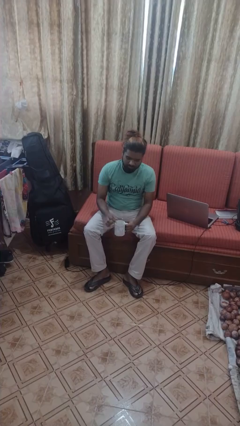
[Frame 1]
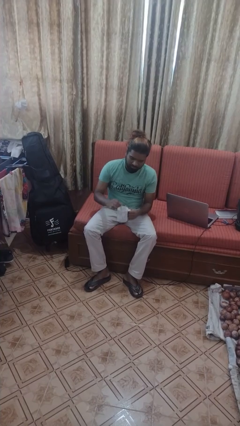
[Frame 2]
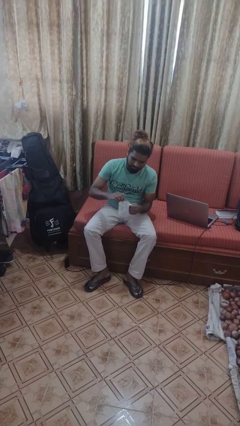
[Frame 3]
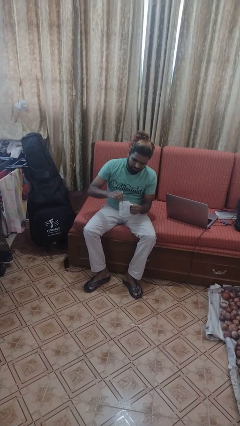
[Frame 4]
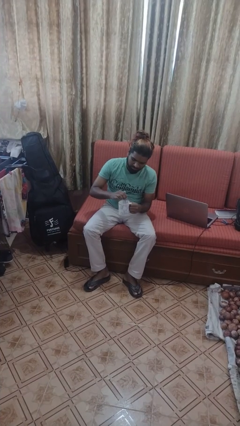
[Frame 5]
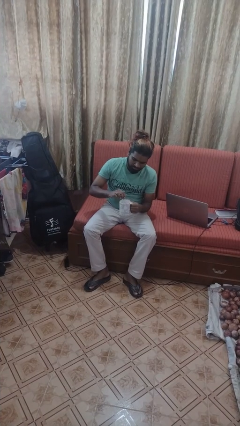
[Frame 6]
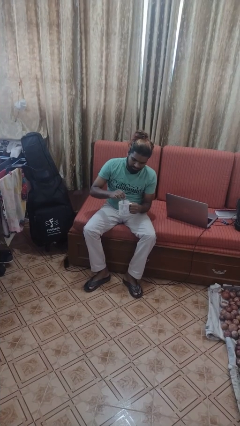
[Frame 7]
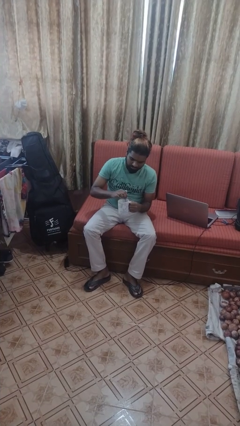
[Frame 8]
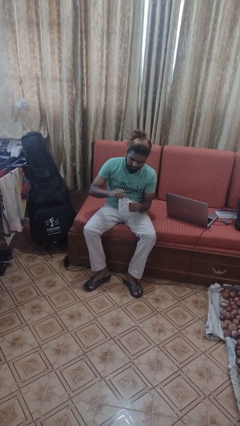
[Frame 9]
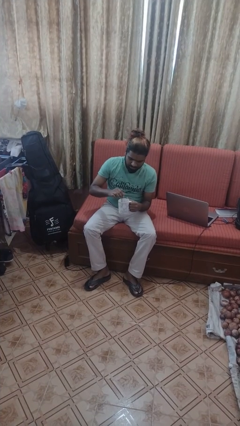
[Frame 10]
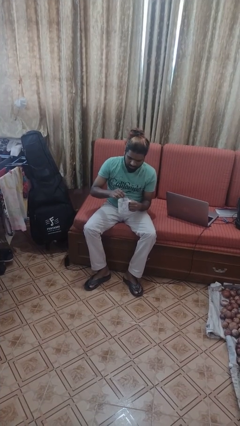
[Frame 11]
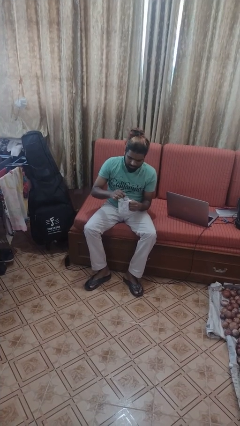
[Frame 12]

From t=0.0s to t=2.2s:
person stirs mug

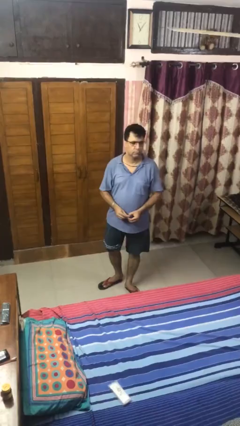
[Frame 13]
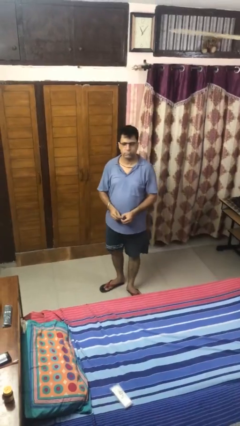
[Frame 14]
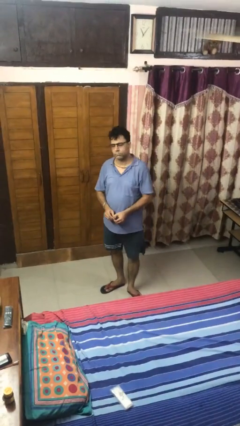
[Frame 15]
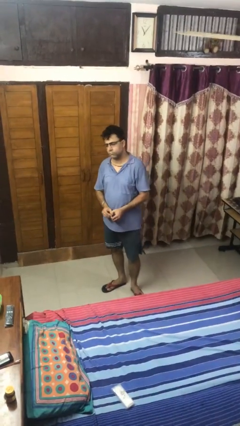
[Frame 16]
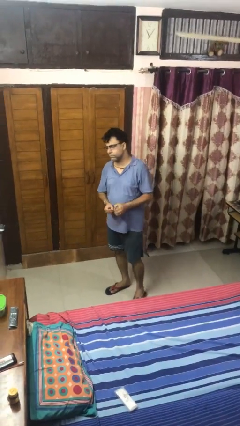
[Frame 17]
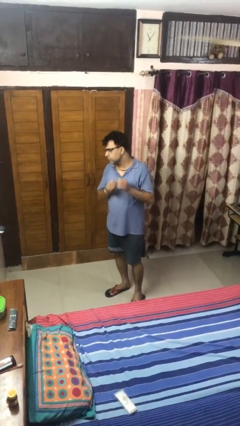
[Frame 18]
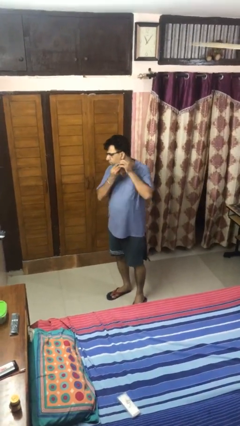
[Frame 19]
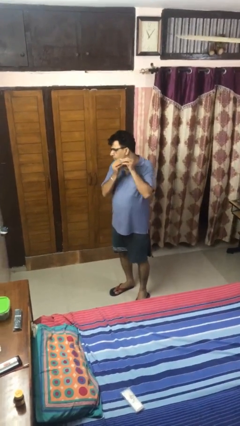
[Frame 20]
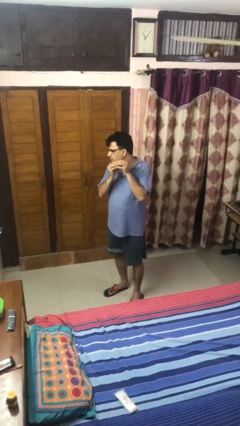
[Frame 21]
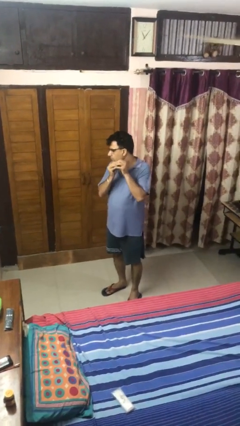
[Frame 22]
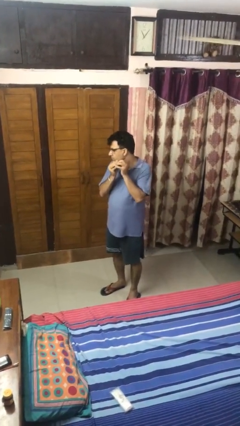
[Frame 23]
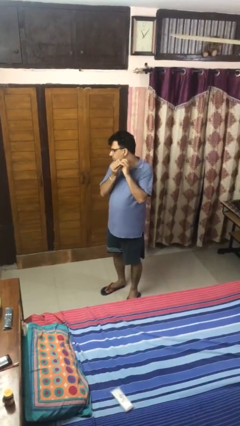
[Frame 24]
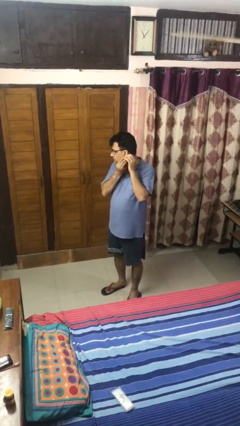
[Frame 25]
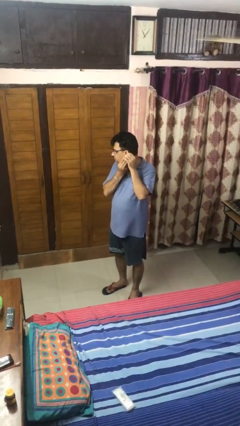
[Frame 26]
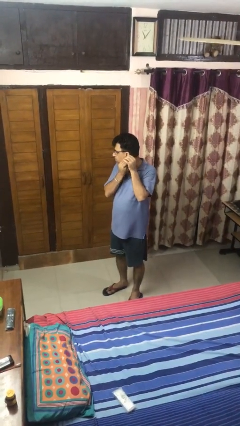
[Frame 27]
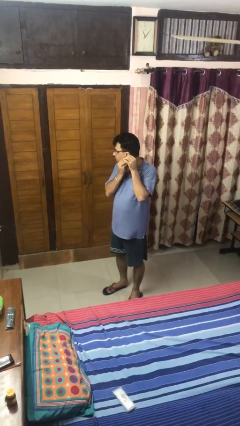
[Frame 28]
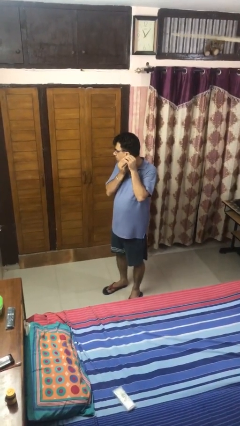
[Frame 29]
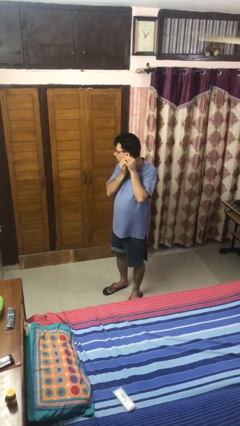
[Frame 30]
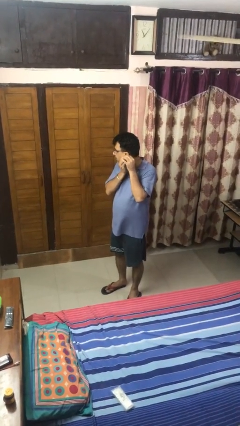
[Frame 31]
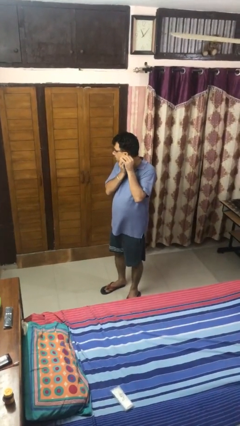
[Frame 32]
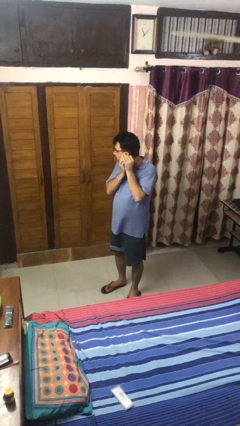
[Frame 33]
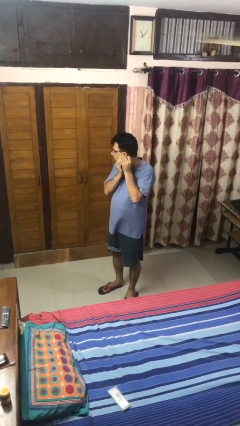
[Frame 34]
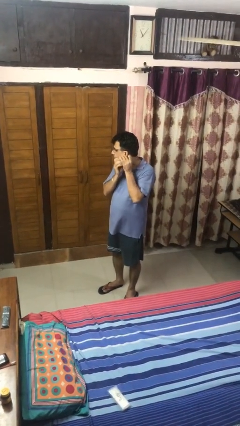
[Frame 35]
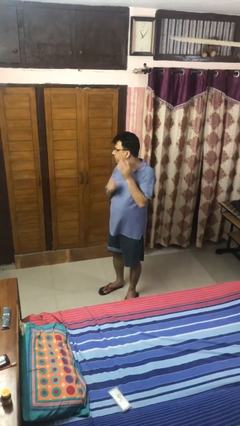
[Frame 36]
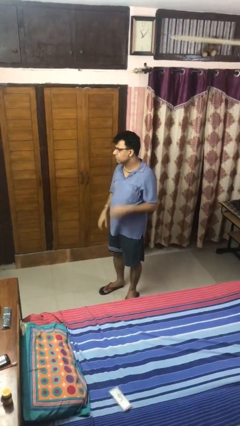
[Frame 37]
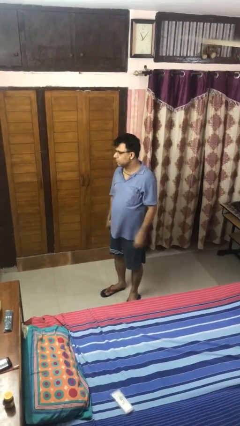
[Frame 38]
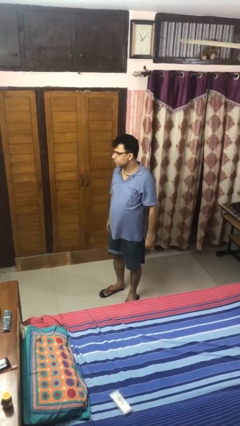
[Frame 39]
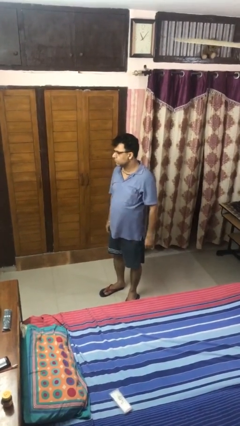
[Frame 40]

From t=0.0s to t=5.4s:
person puts on earrings

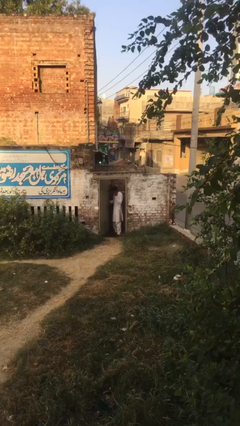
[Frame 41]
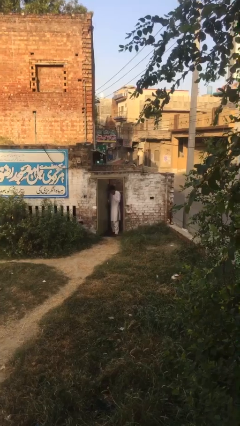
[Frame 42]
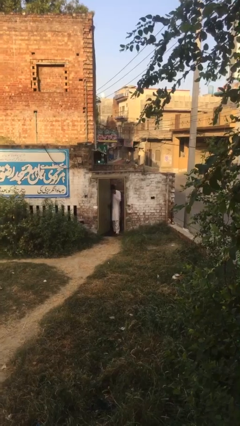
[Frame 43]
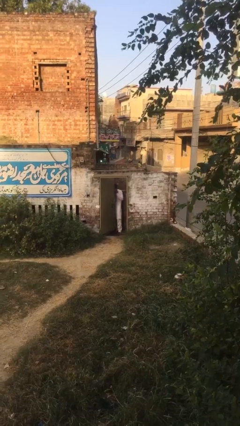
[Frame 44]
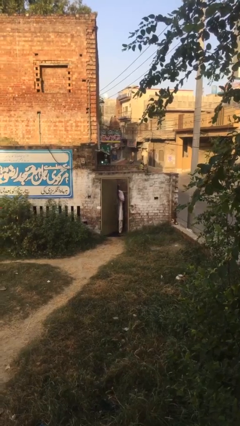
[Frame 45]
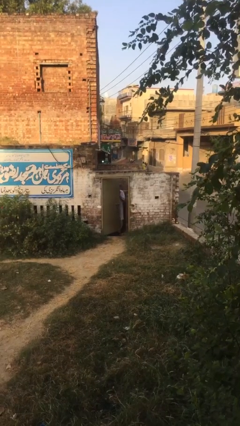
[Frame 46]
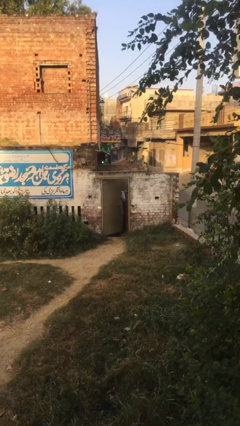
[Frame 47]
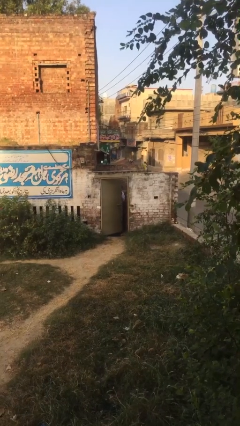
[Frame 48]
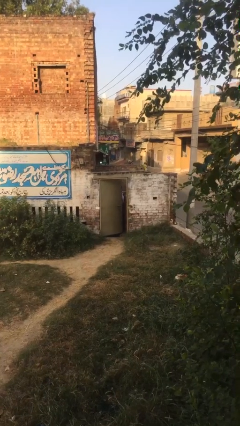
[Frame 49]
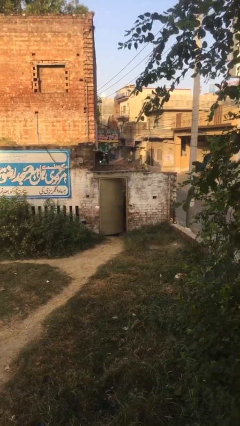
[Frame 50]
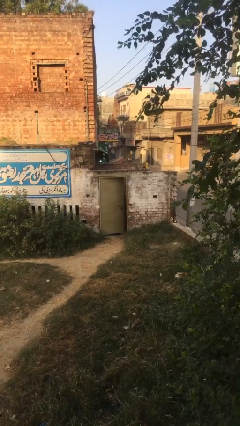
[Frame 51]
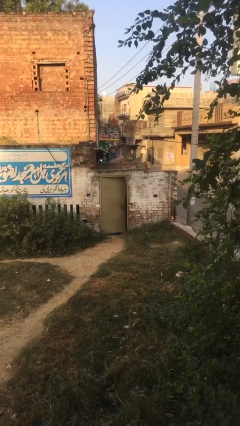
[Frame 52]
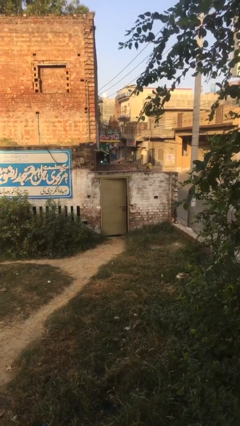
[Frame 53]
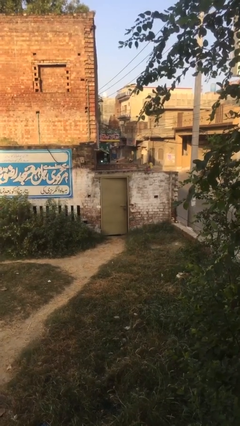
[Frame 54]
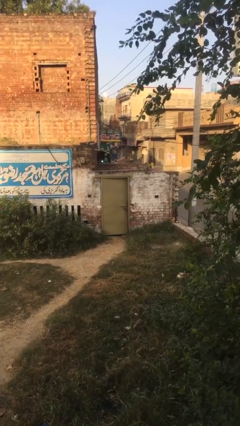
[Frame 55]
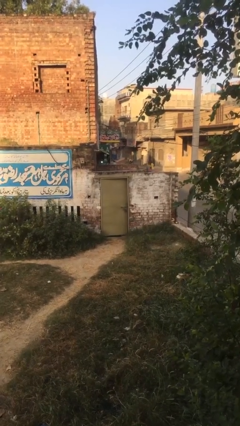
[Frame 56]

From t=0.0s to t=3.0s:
person closes facility door

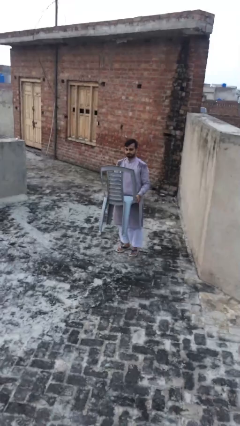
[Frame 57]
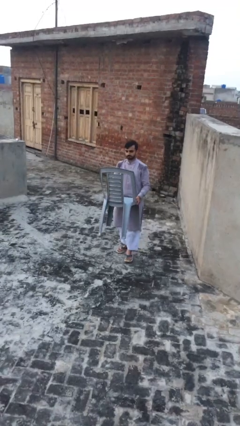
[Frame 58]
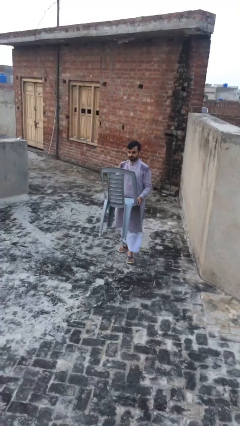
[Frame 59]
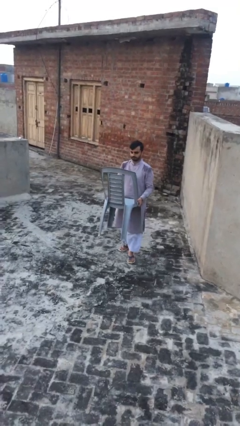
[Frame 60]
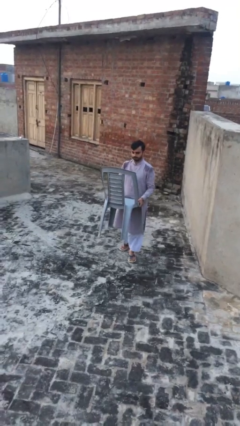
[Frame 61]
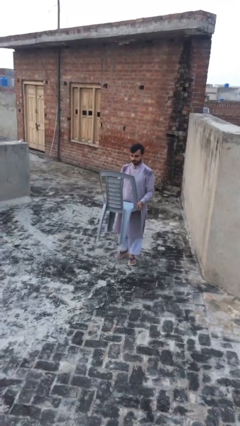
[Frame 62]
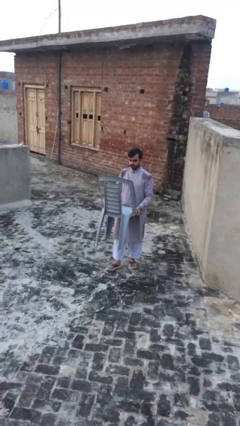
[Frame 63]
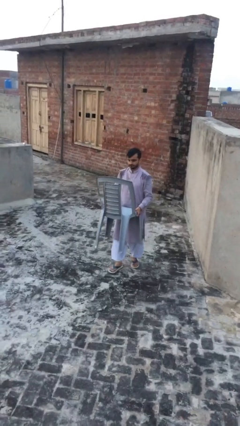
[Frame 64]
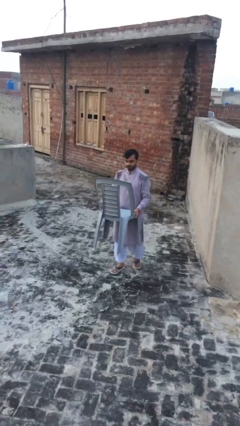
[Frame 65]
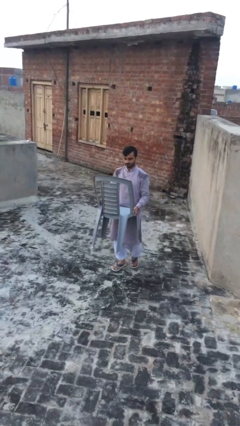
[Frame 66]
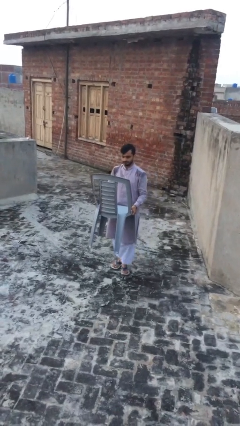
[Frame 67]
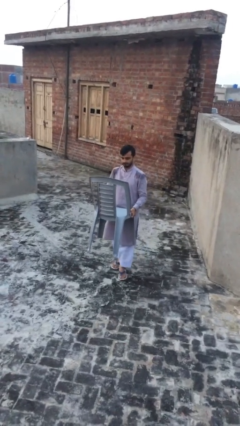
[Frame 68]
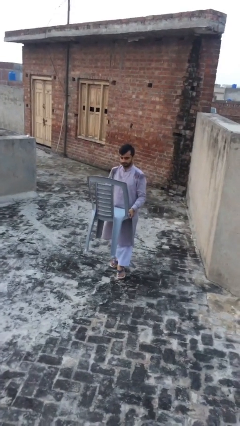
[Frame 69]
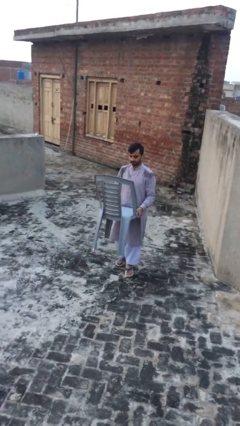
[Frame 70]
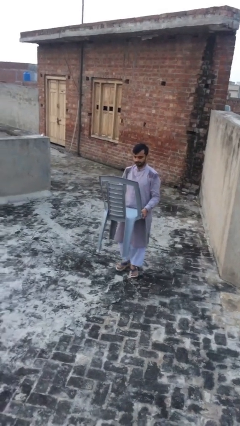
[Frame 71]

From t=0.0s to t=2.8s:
person carries heavy object

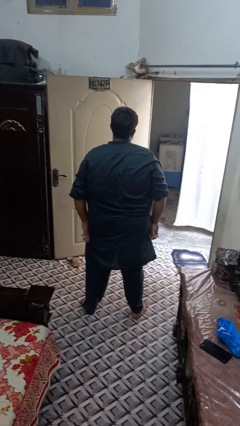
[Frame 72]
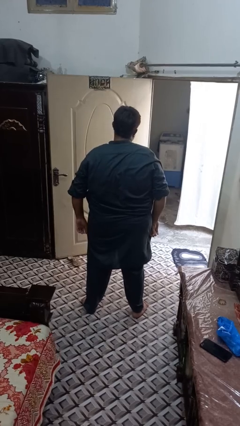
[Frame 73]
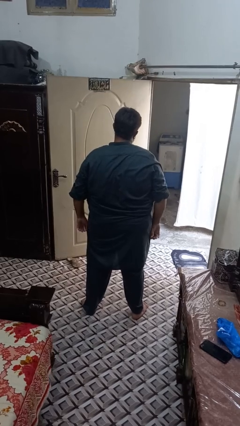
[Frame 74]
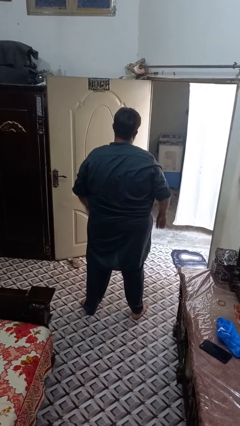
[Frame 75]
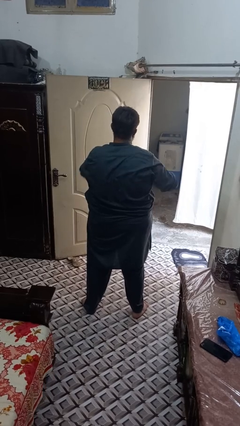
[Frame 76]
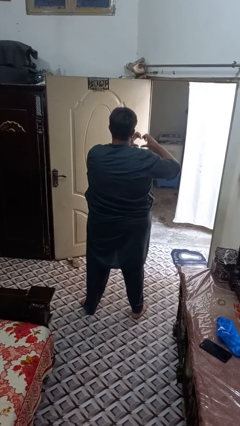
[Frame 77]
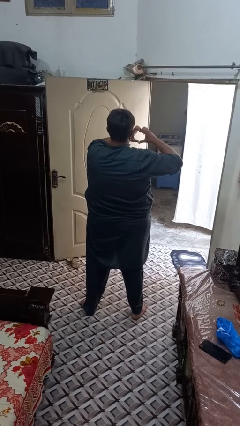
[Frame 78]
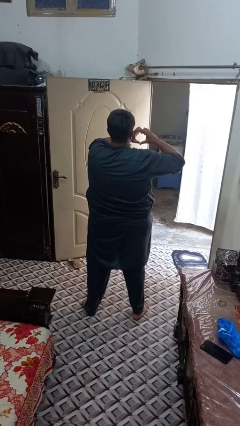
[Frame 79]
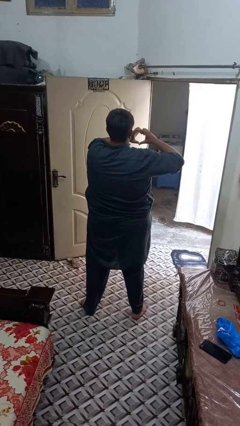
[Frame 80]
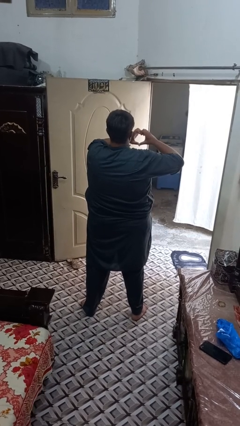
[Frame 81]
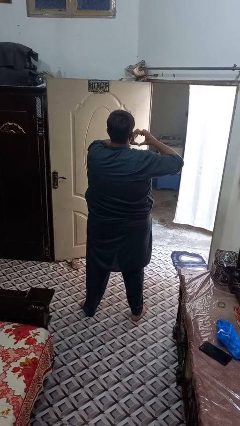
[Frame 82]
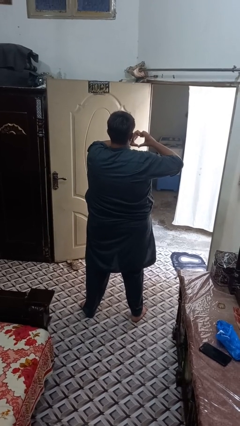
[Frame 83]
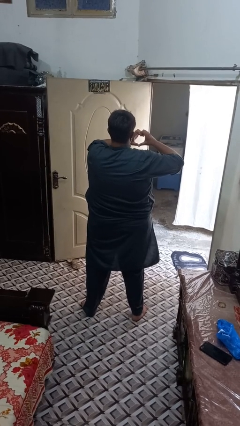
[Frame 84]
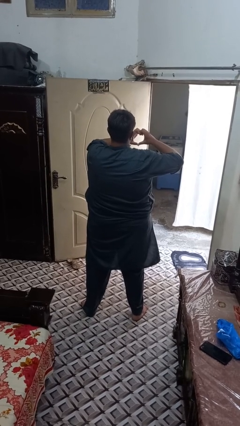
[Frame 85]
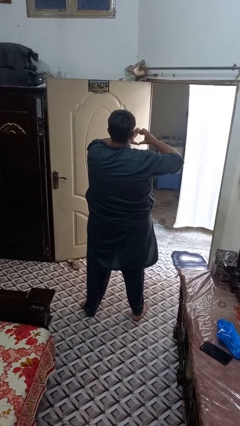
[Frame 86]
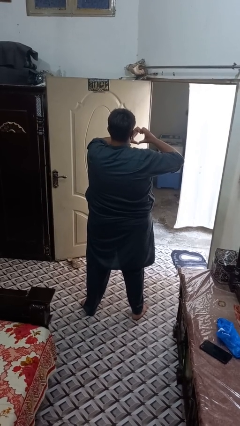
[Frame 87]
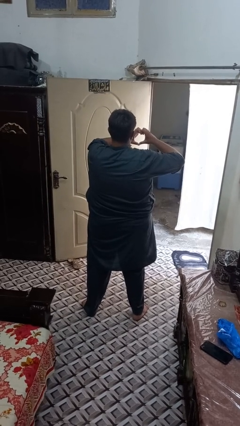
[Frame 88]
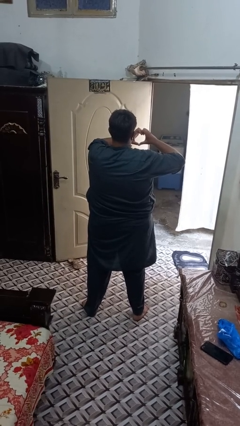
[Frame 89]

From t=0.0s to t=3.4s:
person gestures heart

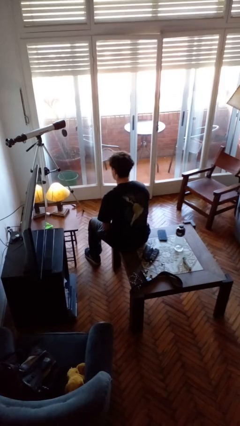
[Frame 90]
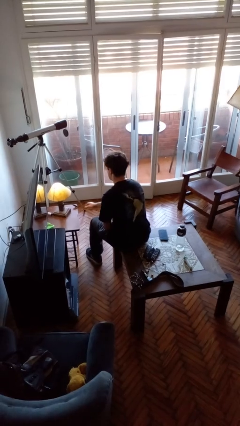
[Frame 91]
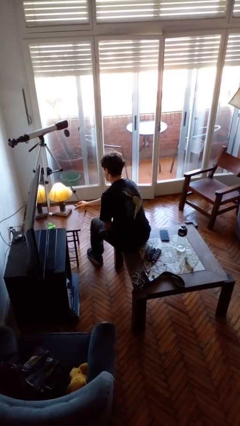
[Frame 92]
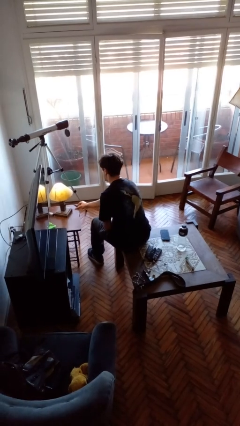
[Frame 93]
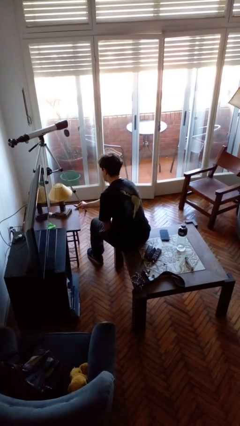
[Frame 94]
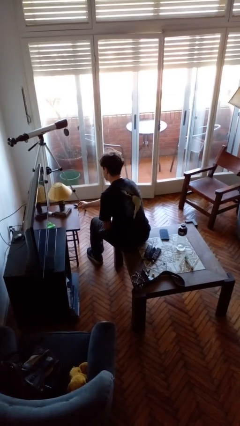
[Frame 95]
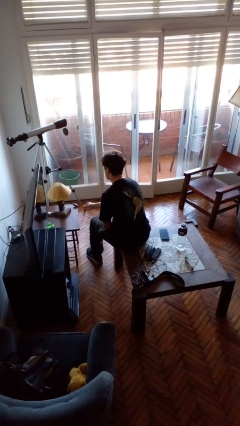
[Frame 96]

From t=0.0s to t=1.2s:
person turns off lamp
